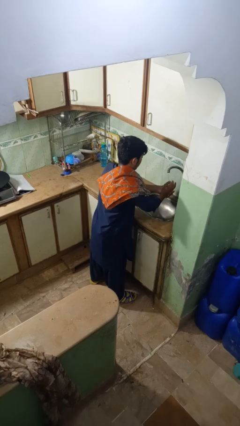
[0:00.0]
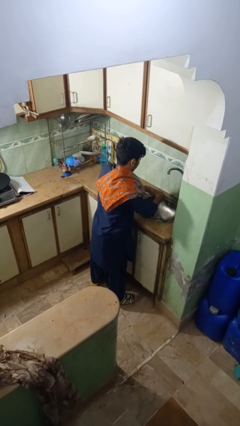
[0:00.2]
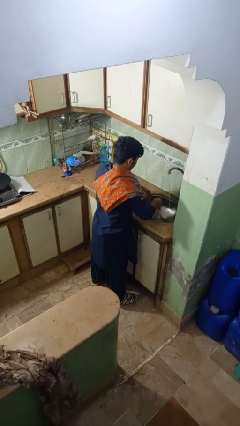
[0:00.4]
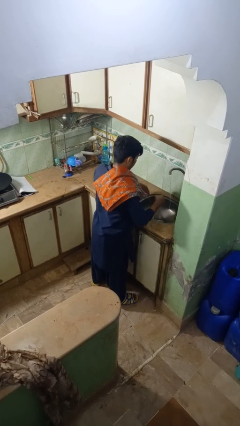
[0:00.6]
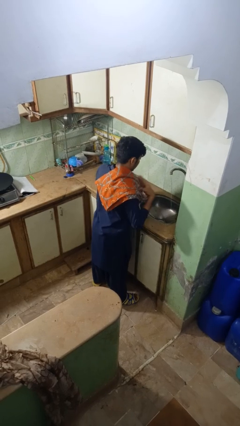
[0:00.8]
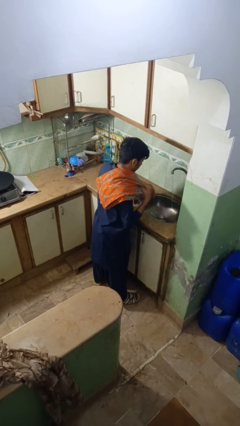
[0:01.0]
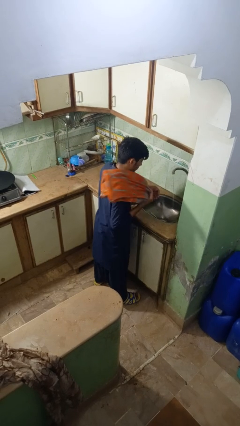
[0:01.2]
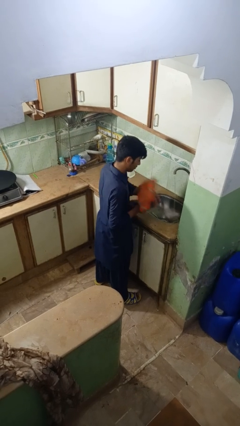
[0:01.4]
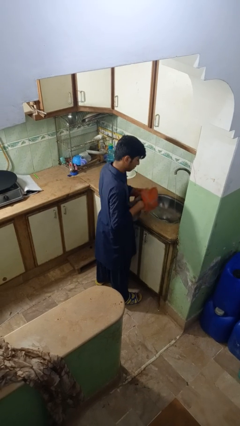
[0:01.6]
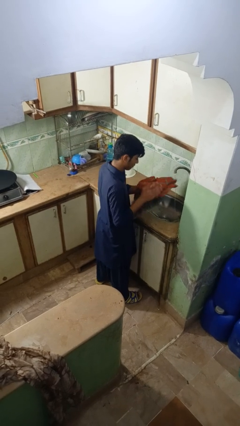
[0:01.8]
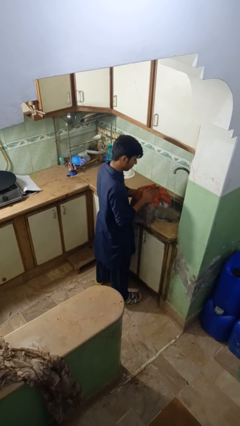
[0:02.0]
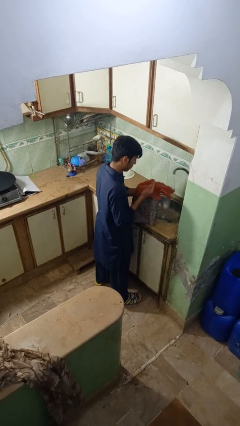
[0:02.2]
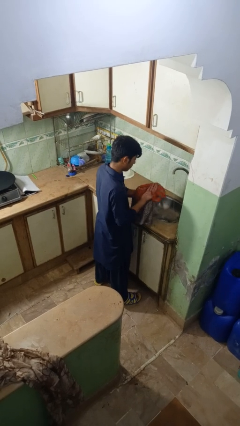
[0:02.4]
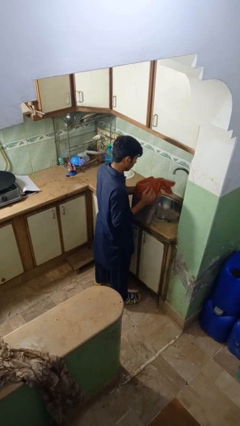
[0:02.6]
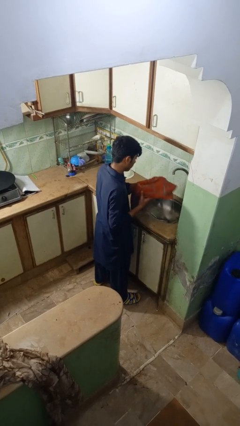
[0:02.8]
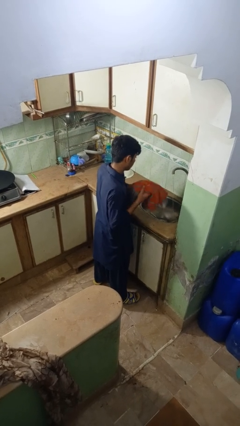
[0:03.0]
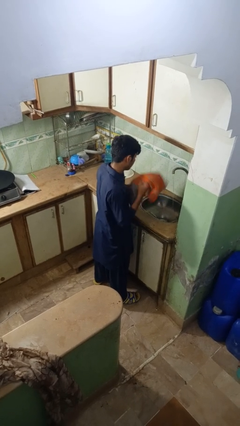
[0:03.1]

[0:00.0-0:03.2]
person dries hands with towel

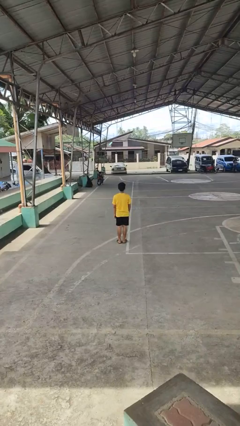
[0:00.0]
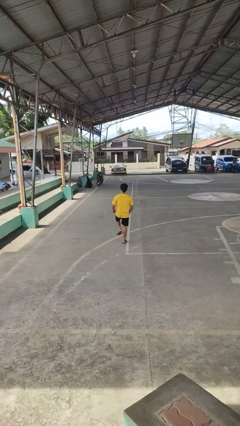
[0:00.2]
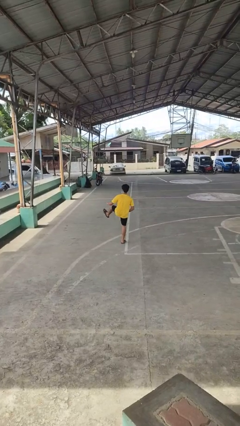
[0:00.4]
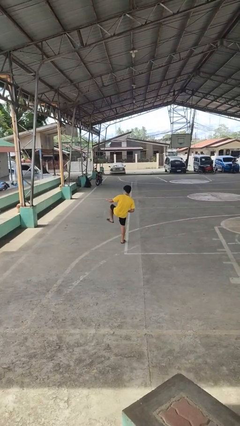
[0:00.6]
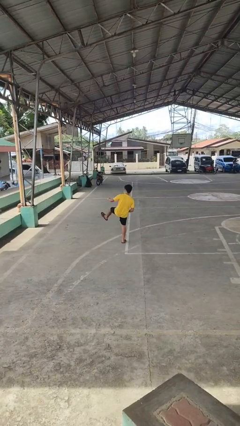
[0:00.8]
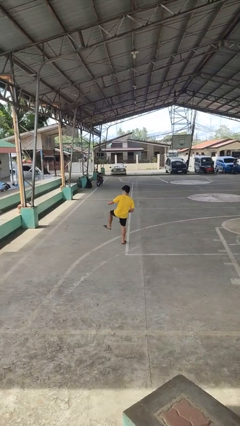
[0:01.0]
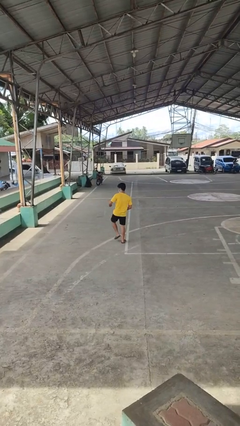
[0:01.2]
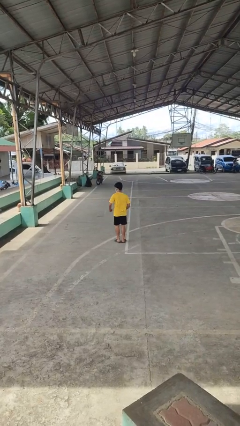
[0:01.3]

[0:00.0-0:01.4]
person karate kicks

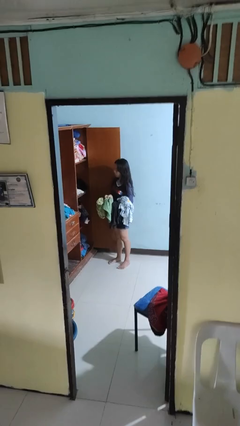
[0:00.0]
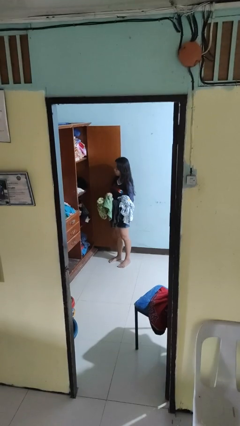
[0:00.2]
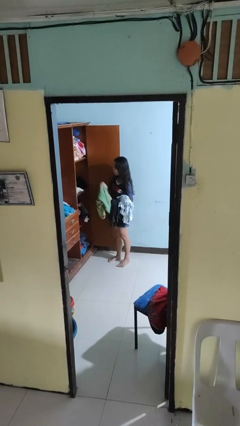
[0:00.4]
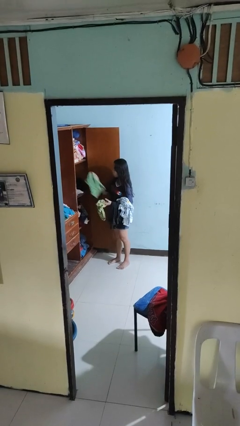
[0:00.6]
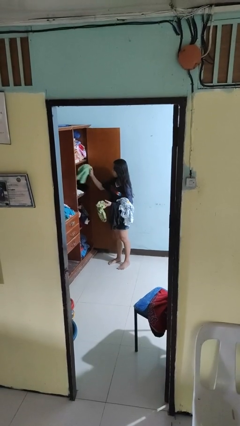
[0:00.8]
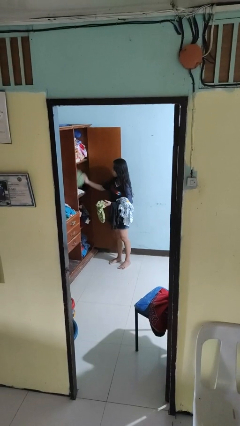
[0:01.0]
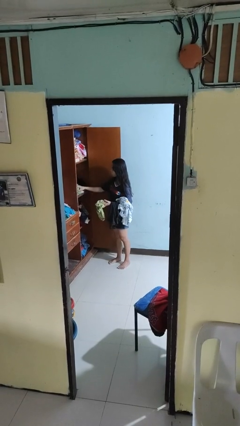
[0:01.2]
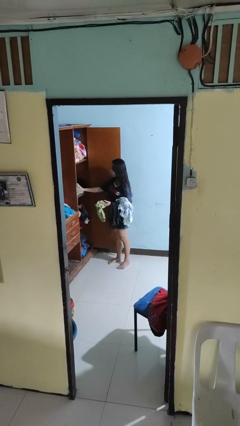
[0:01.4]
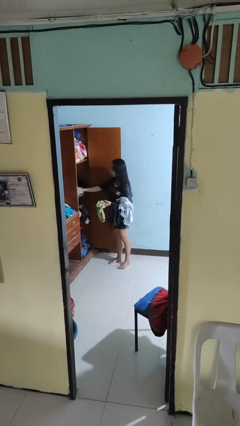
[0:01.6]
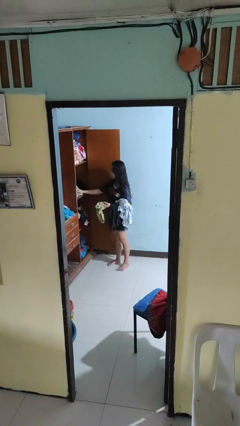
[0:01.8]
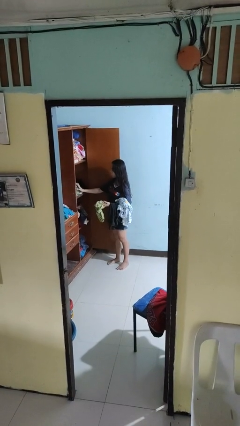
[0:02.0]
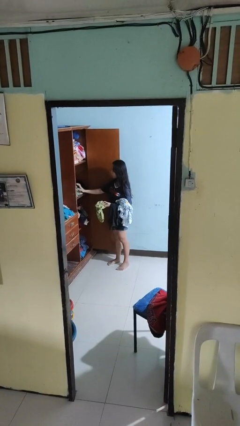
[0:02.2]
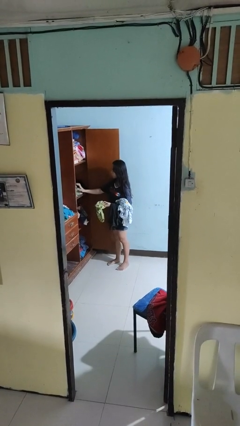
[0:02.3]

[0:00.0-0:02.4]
person puts clothes into dresser

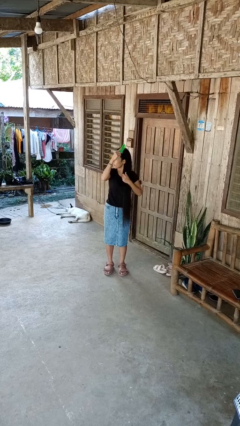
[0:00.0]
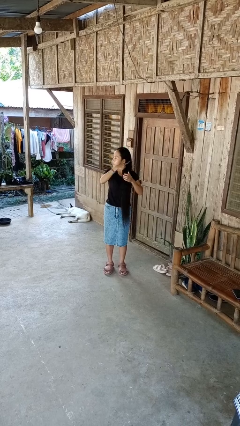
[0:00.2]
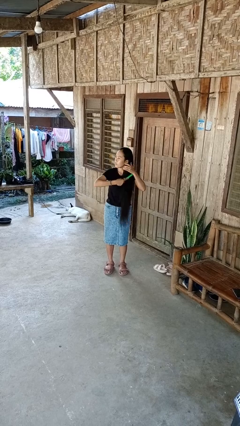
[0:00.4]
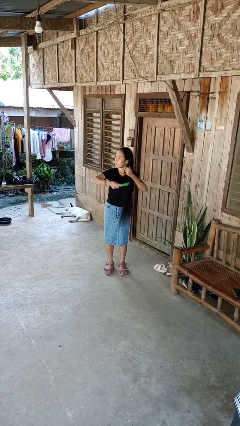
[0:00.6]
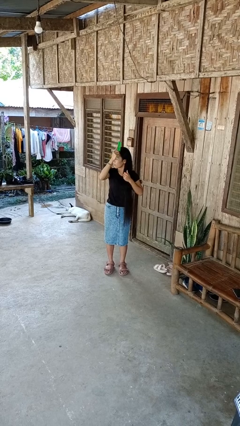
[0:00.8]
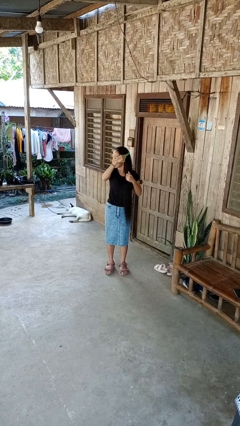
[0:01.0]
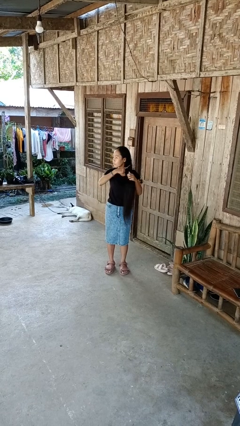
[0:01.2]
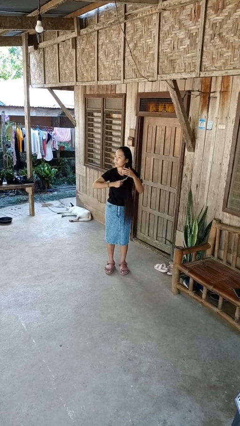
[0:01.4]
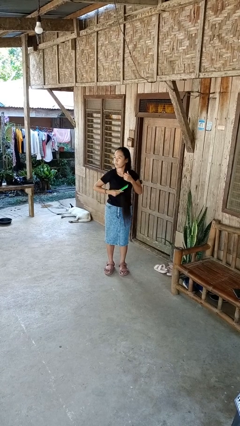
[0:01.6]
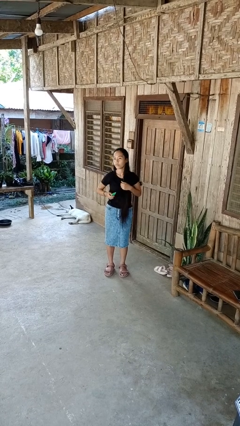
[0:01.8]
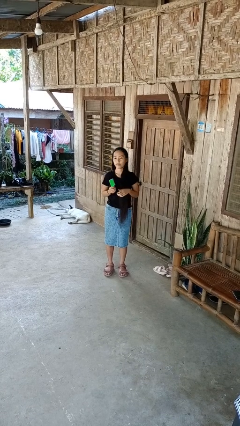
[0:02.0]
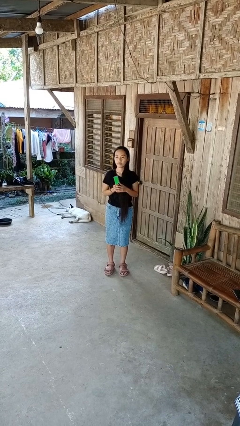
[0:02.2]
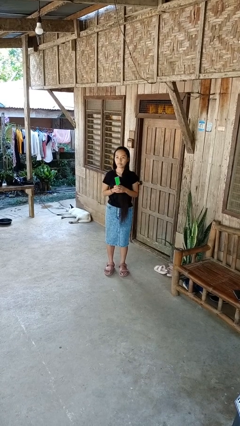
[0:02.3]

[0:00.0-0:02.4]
person brushes hair

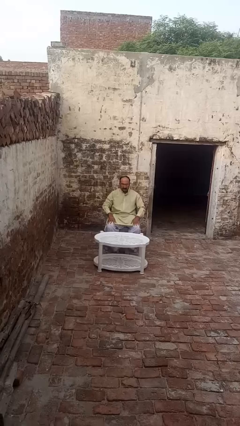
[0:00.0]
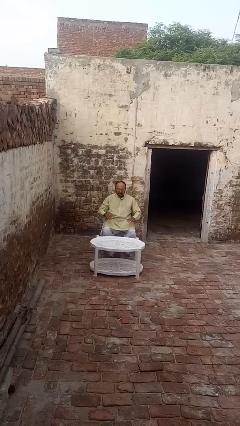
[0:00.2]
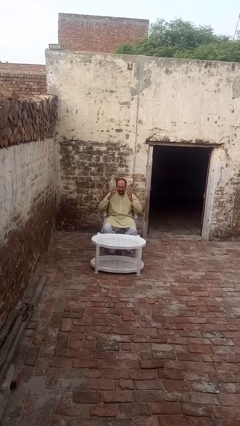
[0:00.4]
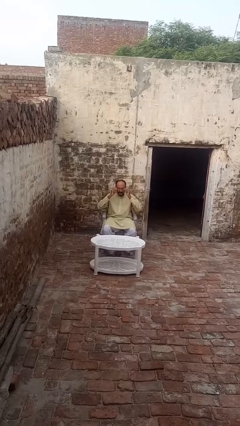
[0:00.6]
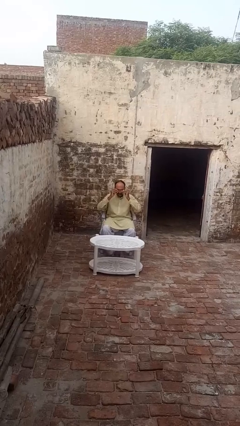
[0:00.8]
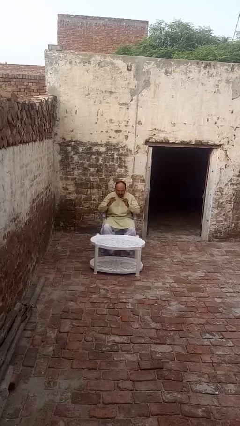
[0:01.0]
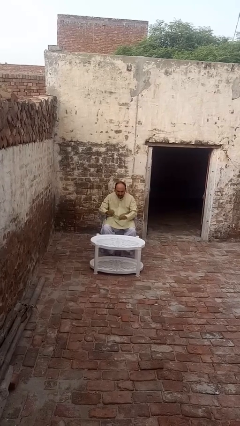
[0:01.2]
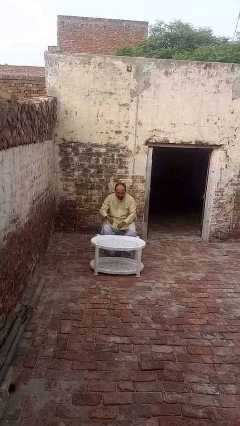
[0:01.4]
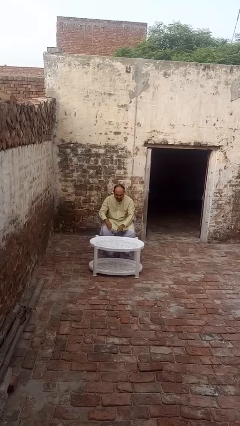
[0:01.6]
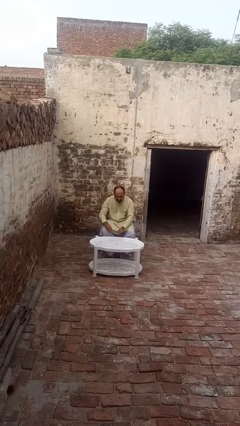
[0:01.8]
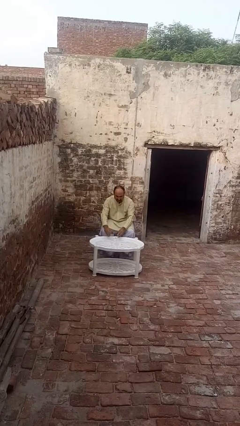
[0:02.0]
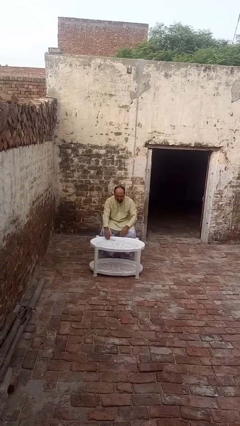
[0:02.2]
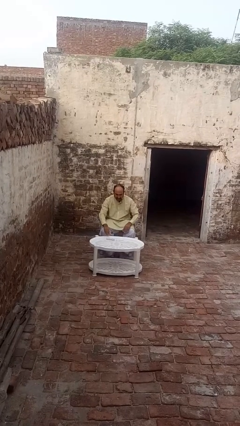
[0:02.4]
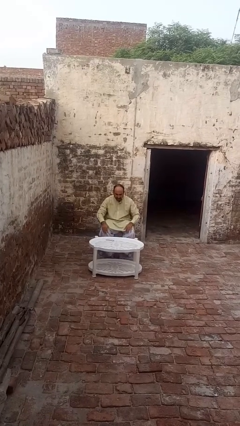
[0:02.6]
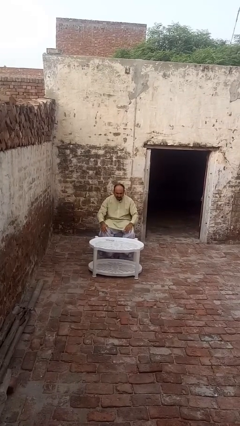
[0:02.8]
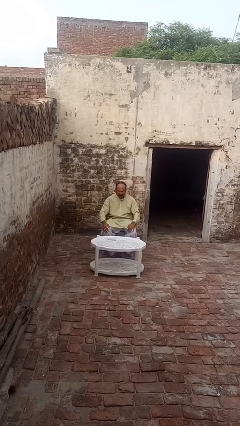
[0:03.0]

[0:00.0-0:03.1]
person takes off glasses

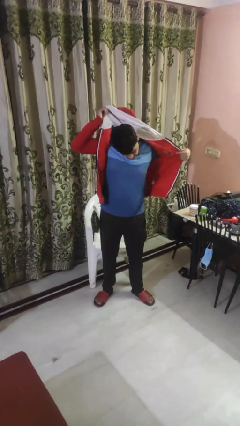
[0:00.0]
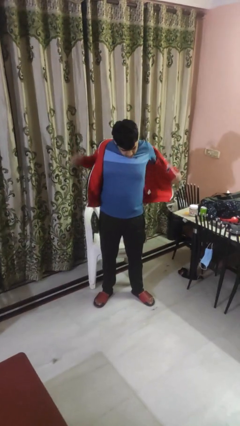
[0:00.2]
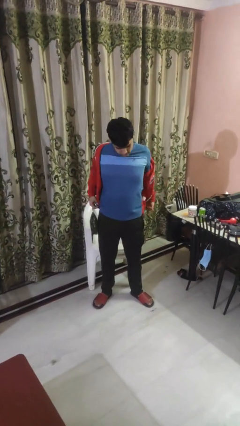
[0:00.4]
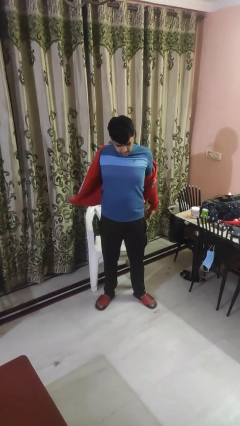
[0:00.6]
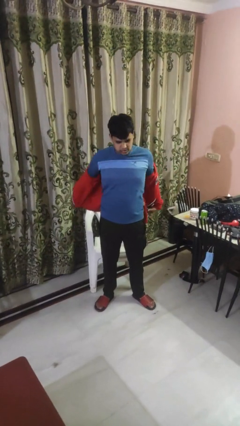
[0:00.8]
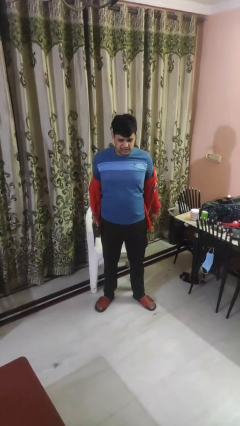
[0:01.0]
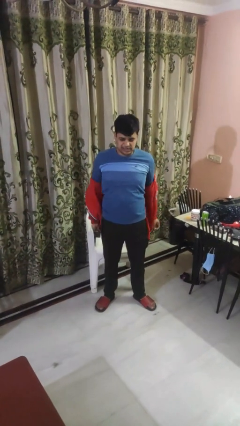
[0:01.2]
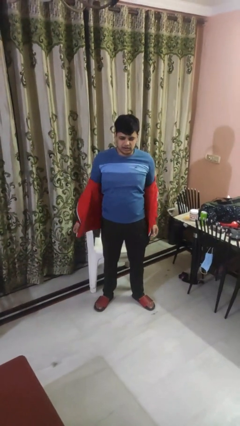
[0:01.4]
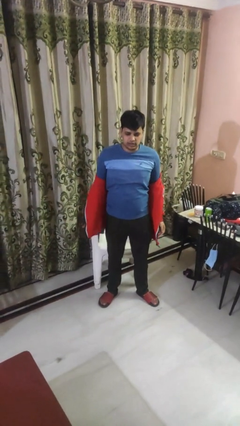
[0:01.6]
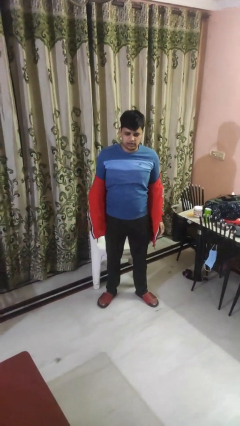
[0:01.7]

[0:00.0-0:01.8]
person takes off hoodie

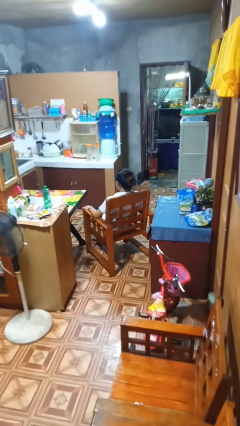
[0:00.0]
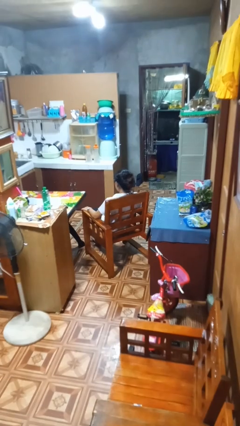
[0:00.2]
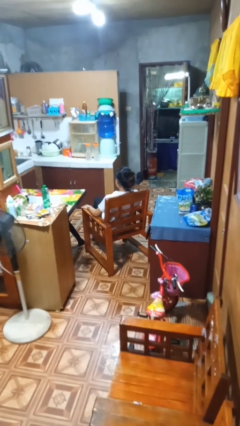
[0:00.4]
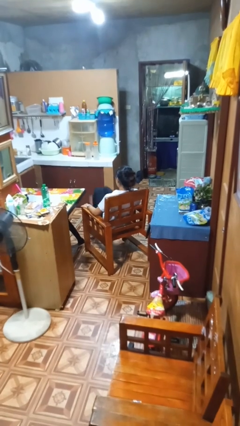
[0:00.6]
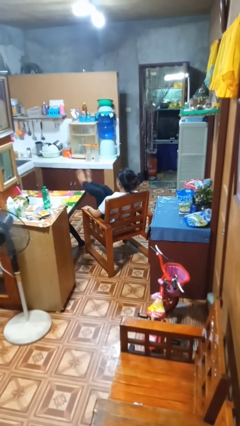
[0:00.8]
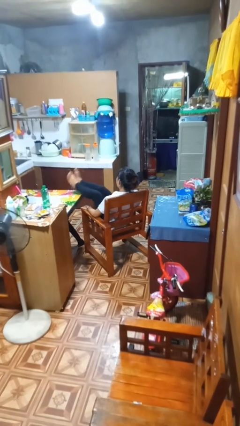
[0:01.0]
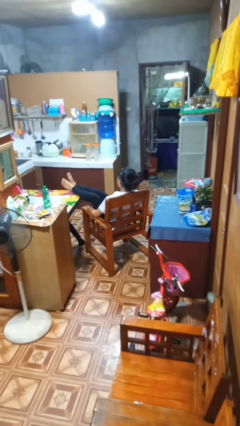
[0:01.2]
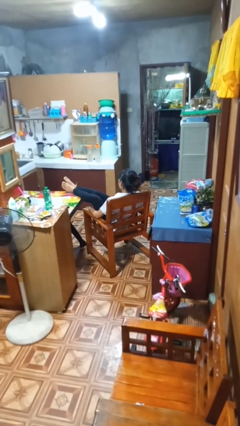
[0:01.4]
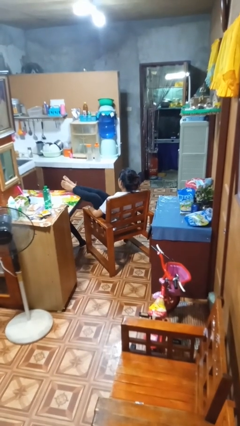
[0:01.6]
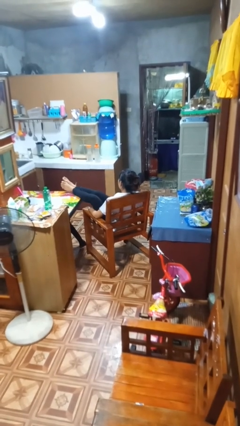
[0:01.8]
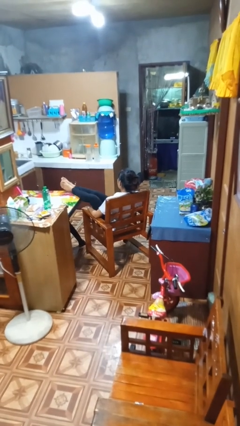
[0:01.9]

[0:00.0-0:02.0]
person puts feet up

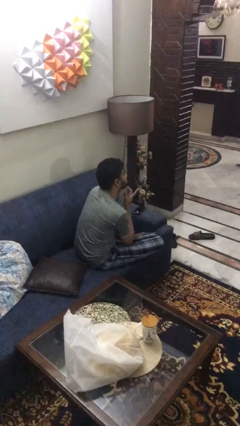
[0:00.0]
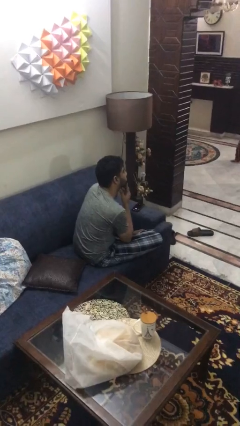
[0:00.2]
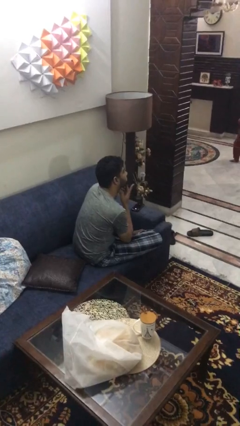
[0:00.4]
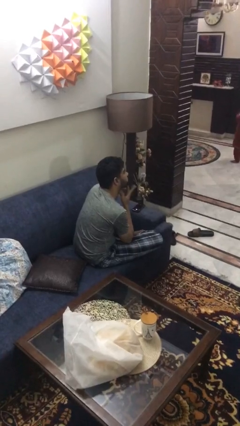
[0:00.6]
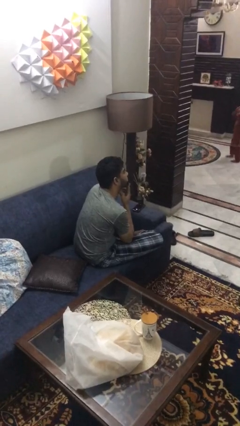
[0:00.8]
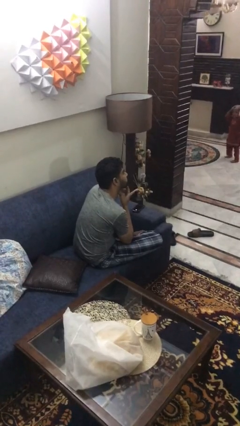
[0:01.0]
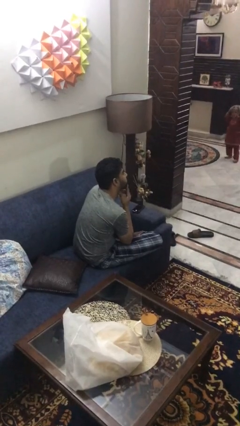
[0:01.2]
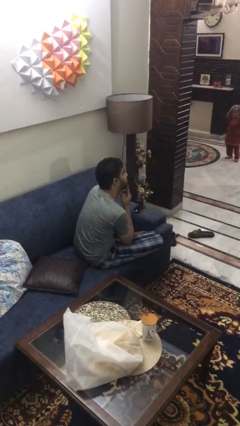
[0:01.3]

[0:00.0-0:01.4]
person strokes chin
